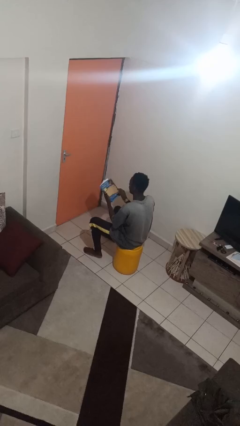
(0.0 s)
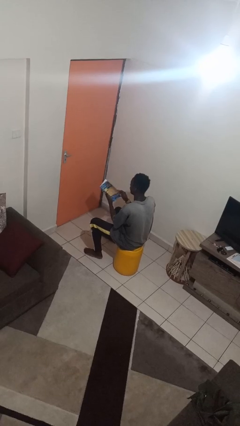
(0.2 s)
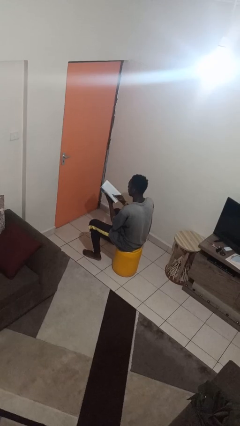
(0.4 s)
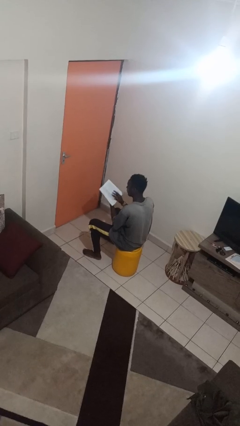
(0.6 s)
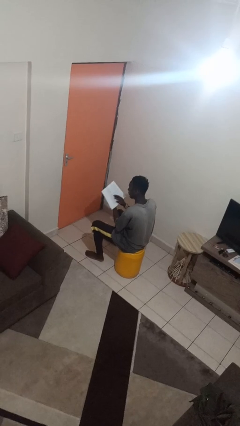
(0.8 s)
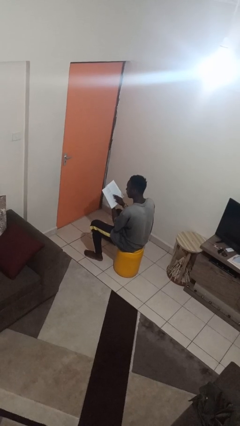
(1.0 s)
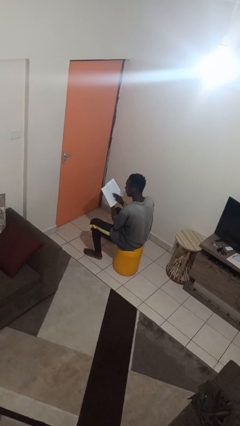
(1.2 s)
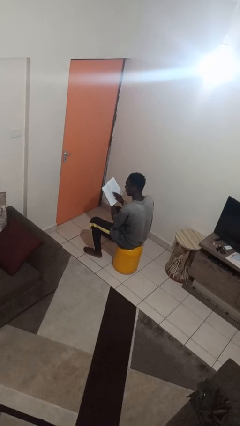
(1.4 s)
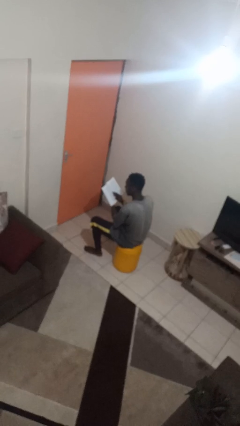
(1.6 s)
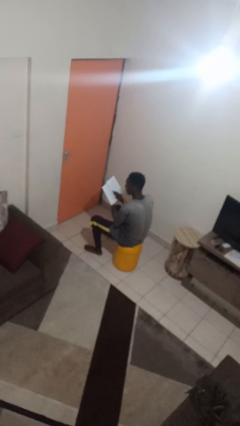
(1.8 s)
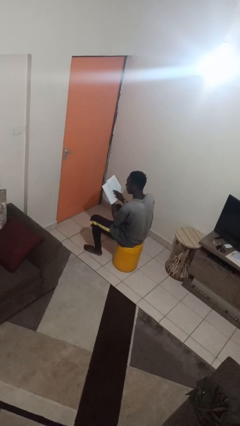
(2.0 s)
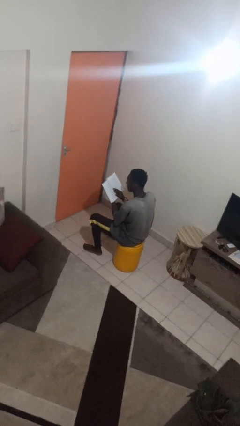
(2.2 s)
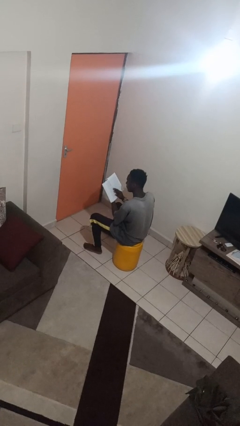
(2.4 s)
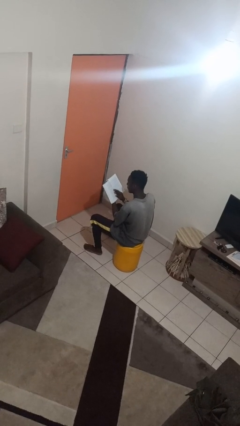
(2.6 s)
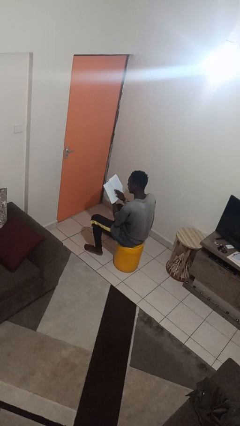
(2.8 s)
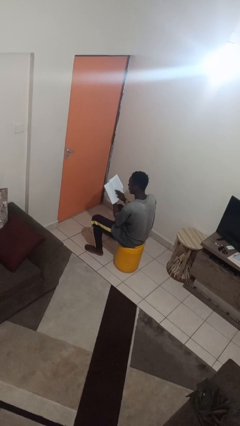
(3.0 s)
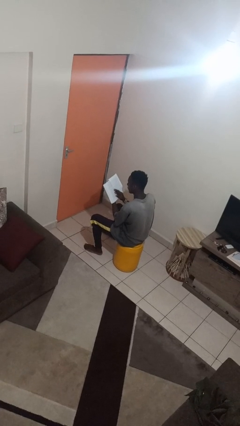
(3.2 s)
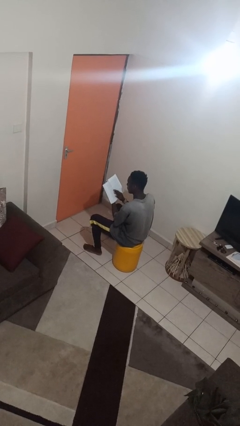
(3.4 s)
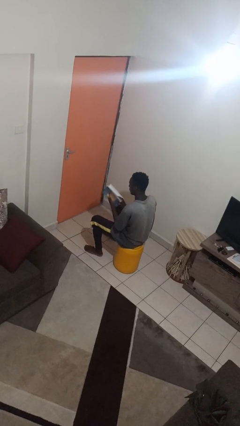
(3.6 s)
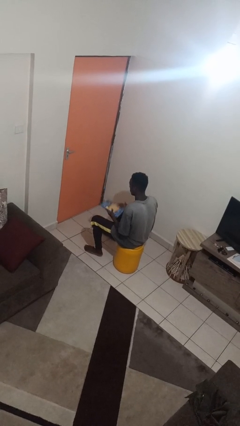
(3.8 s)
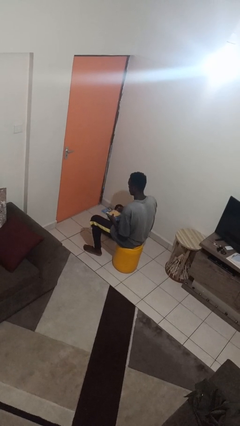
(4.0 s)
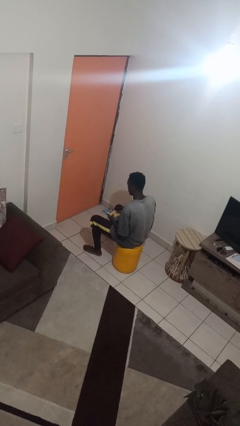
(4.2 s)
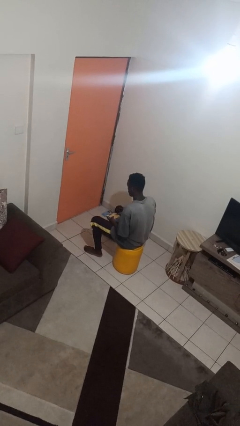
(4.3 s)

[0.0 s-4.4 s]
person reads book

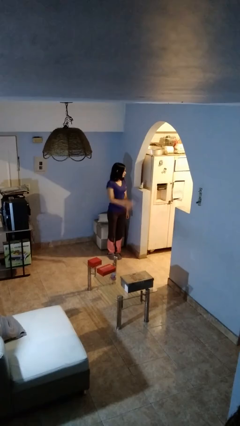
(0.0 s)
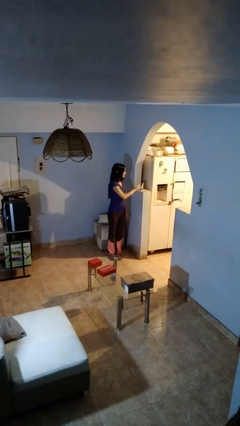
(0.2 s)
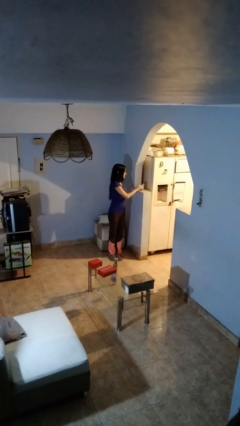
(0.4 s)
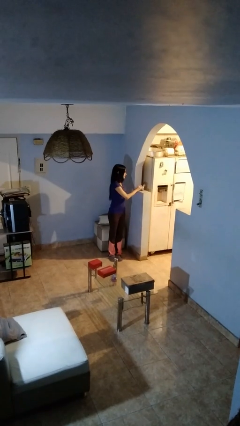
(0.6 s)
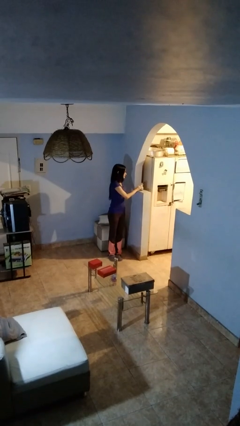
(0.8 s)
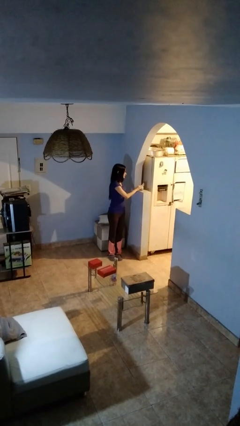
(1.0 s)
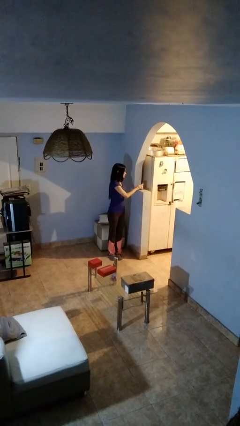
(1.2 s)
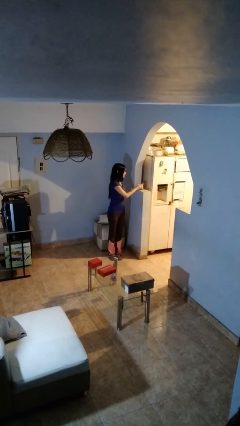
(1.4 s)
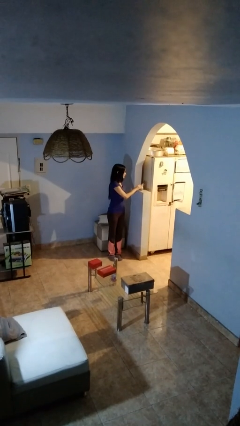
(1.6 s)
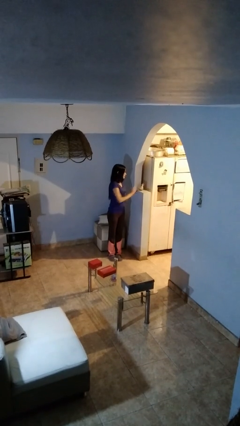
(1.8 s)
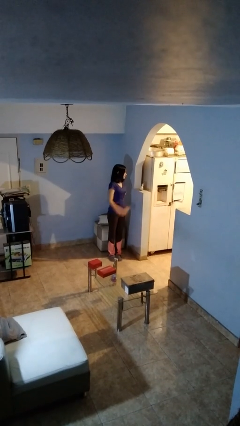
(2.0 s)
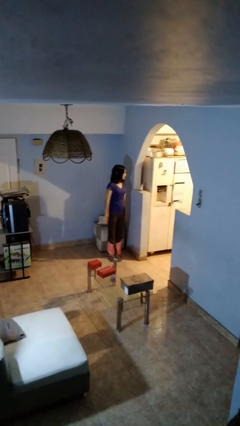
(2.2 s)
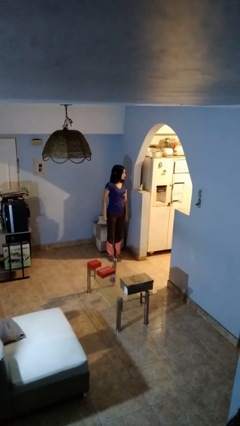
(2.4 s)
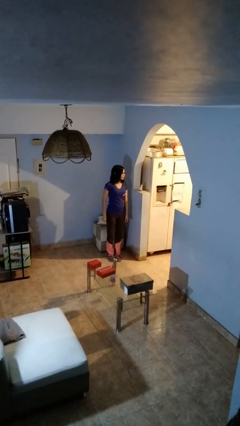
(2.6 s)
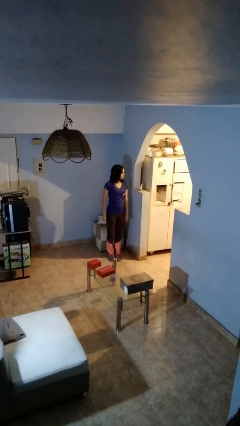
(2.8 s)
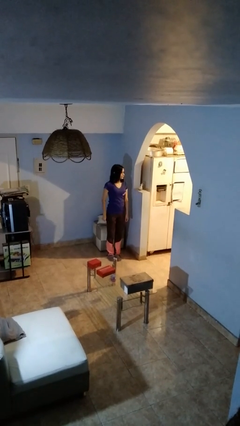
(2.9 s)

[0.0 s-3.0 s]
person taps object with finger

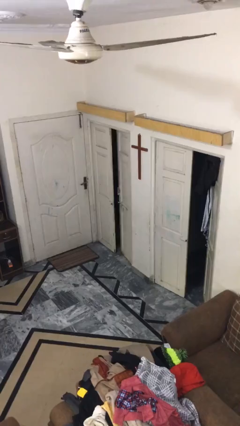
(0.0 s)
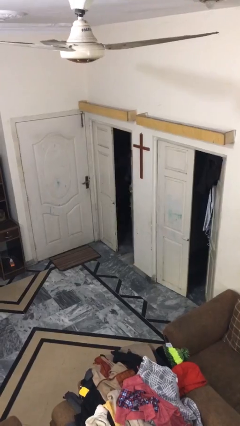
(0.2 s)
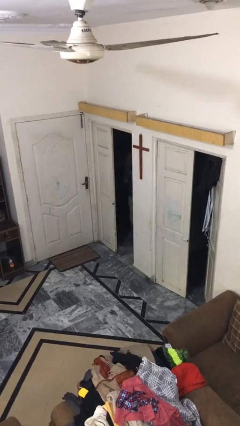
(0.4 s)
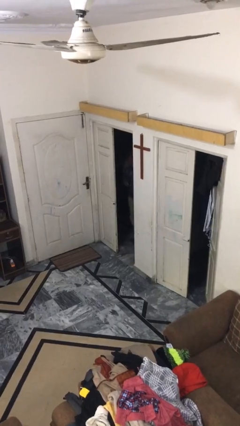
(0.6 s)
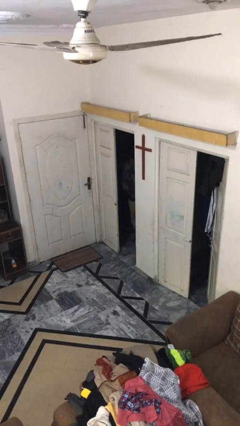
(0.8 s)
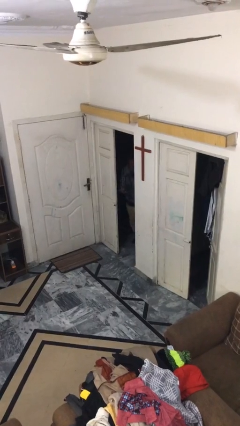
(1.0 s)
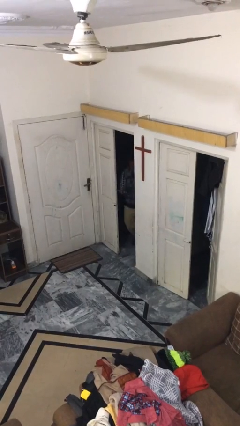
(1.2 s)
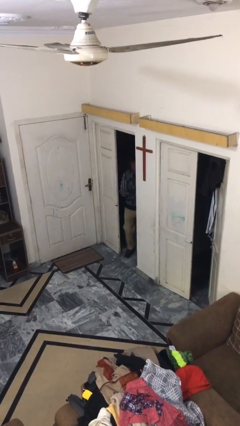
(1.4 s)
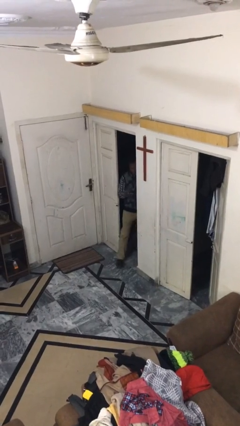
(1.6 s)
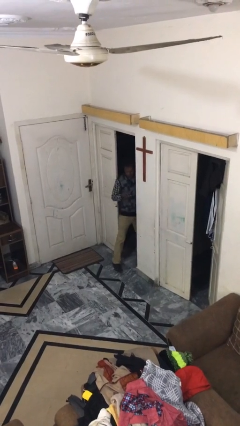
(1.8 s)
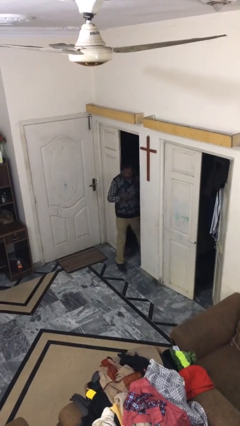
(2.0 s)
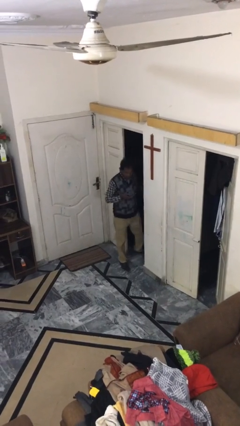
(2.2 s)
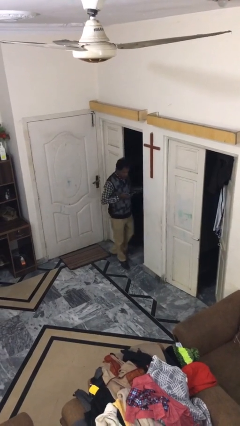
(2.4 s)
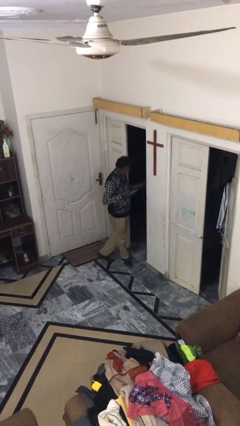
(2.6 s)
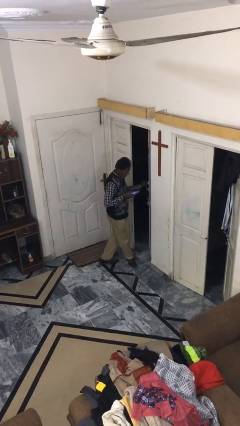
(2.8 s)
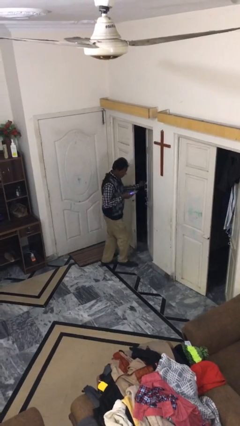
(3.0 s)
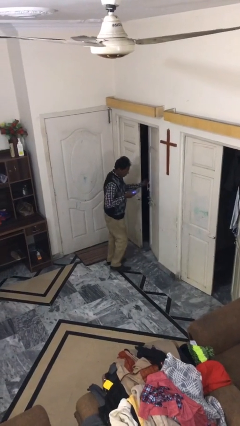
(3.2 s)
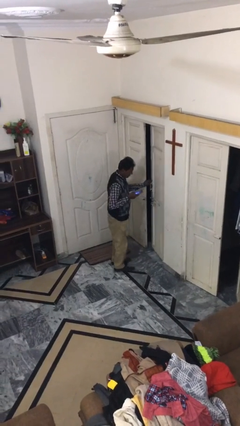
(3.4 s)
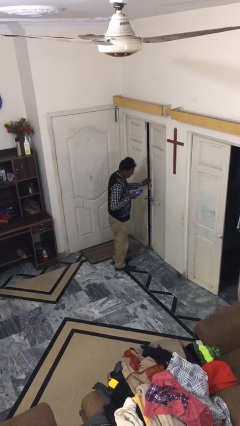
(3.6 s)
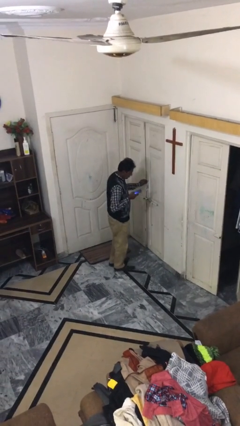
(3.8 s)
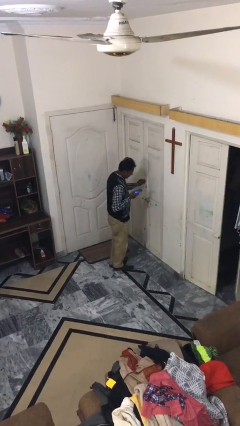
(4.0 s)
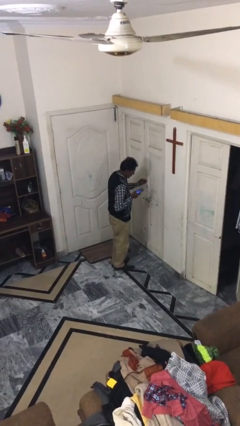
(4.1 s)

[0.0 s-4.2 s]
person enters scene through structure

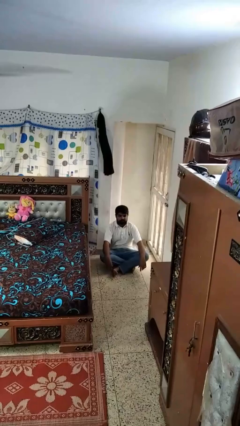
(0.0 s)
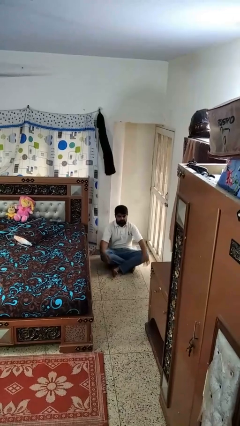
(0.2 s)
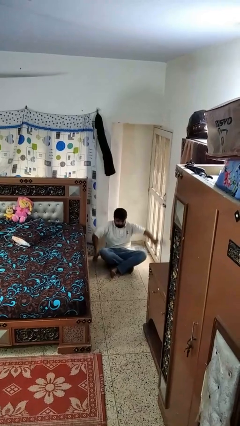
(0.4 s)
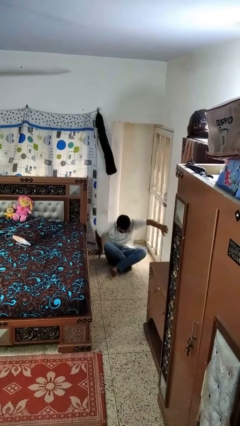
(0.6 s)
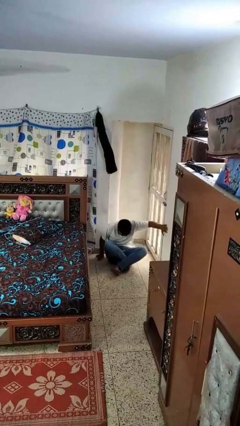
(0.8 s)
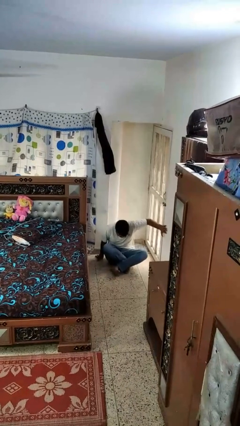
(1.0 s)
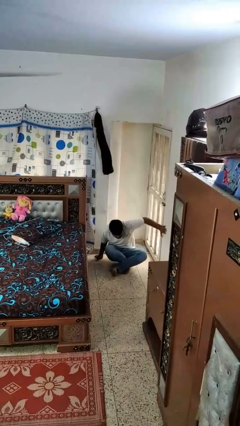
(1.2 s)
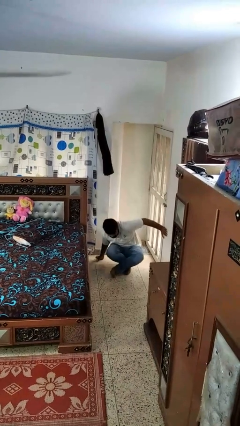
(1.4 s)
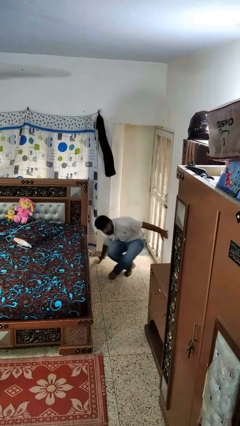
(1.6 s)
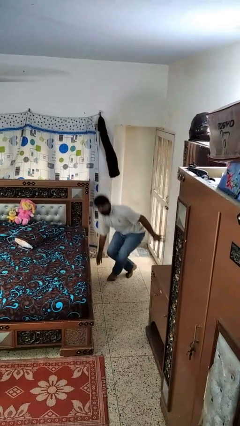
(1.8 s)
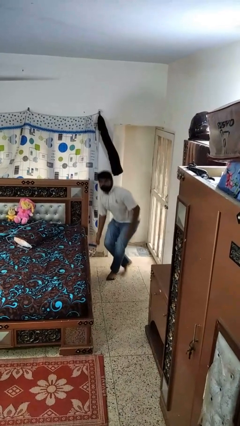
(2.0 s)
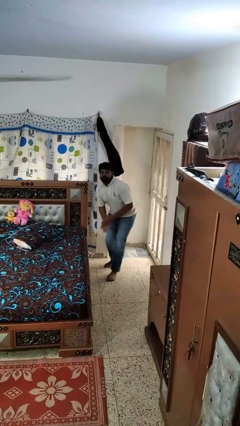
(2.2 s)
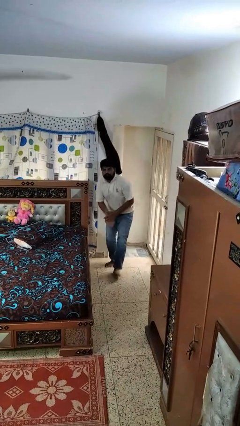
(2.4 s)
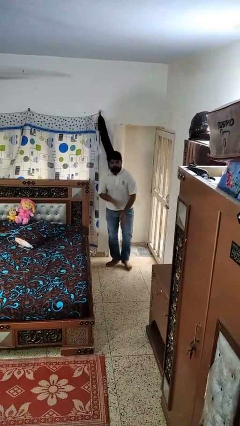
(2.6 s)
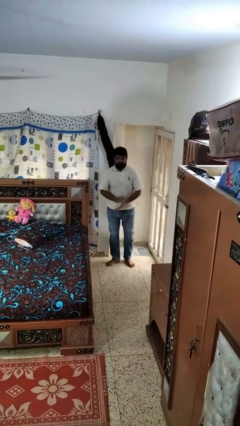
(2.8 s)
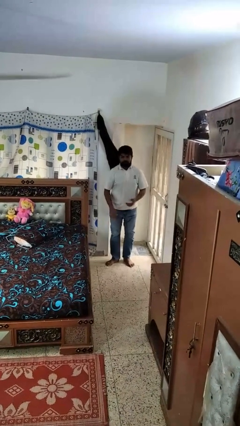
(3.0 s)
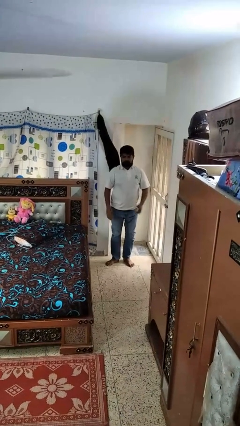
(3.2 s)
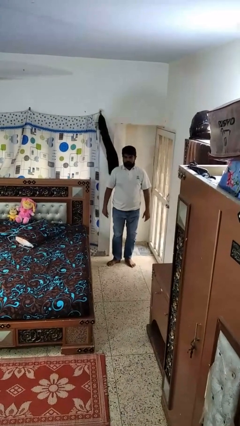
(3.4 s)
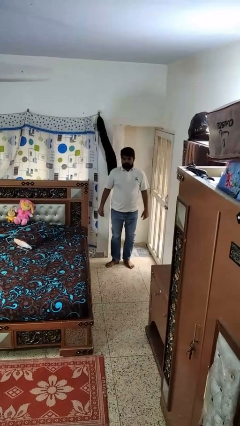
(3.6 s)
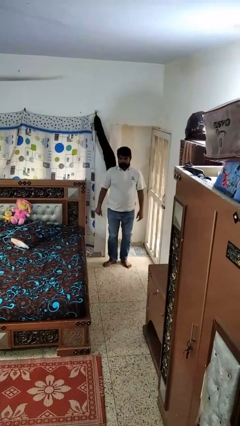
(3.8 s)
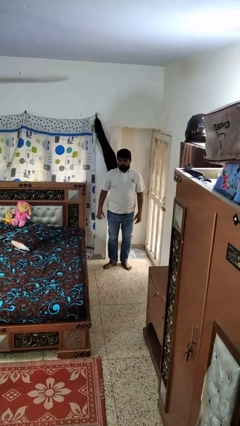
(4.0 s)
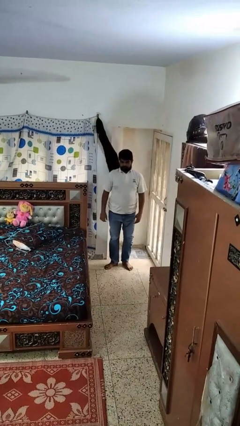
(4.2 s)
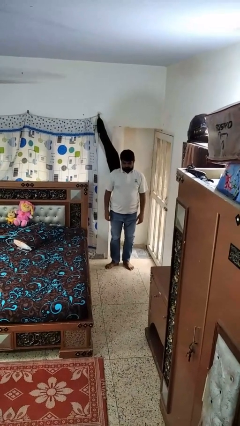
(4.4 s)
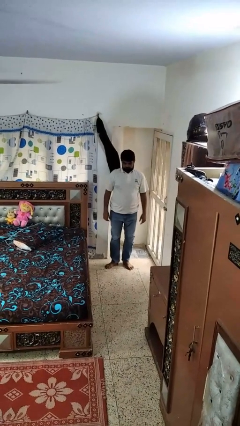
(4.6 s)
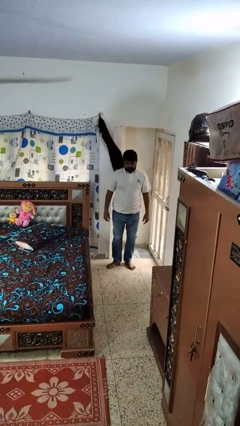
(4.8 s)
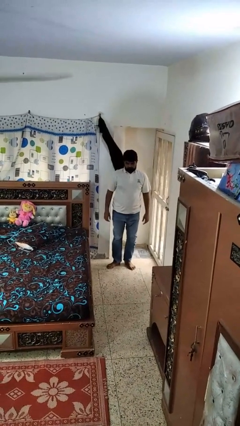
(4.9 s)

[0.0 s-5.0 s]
person stands up from floor

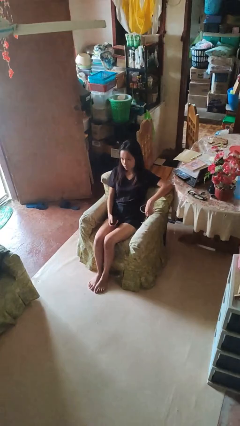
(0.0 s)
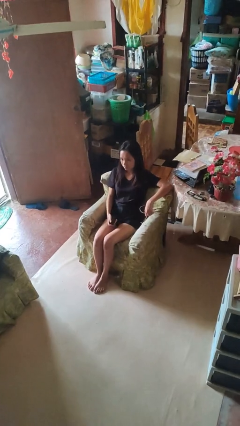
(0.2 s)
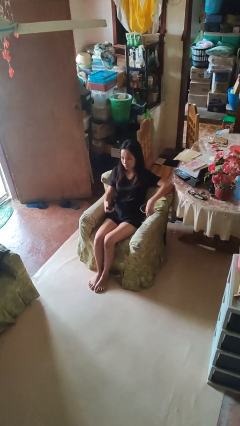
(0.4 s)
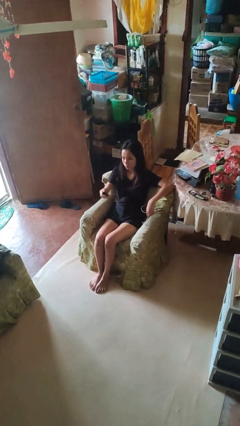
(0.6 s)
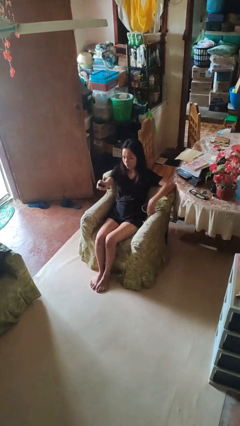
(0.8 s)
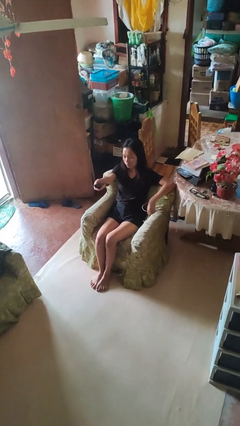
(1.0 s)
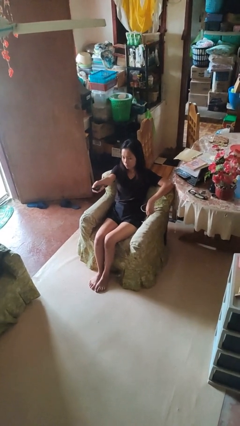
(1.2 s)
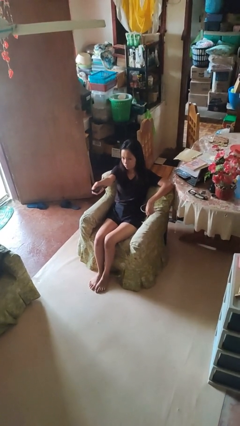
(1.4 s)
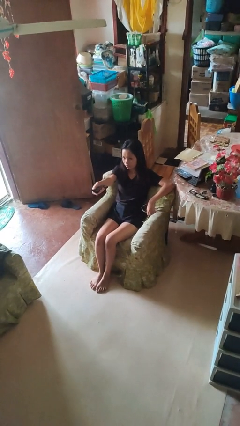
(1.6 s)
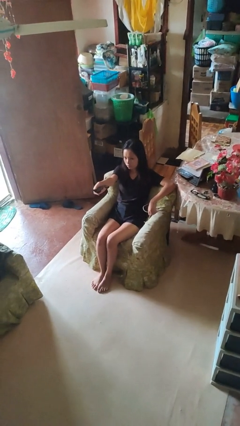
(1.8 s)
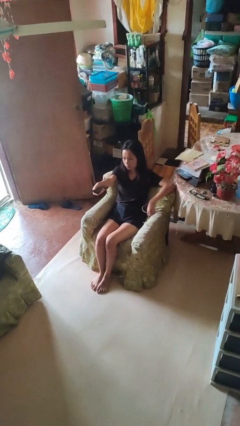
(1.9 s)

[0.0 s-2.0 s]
person uses television remote
